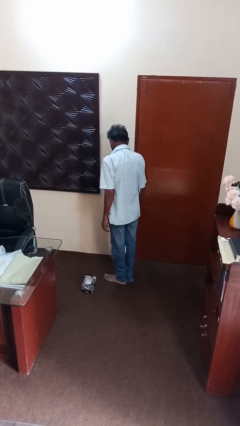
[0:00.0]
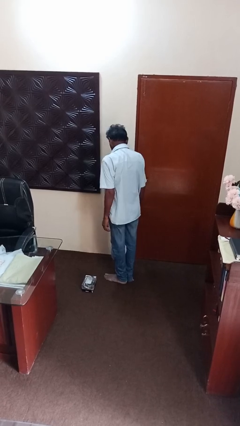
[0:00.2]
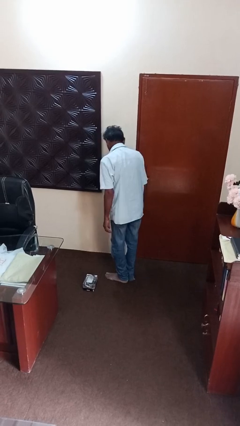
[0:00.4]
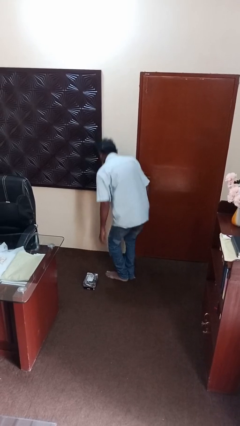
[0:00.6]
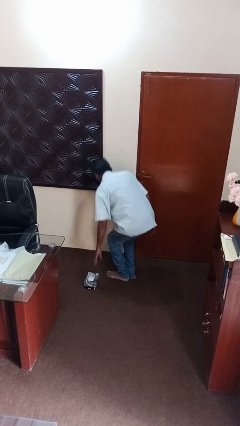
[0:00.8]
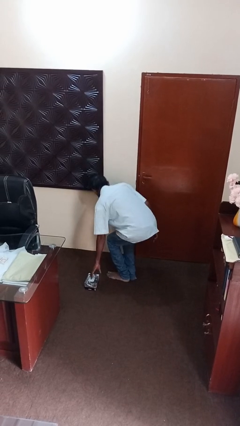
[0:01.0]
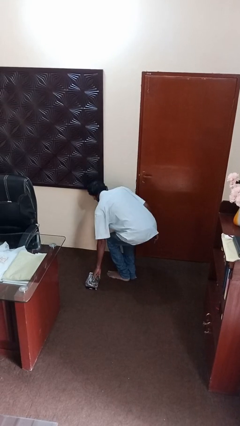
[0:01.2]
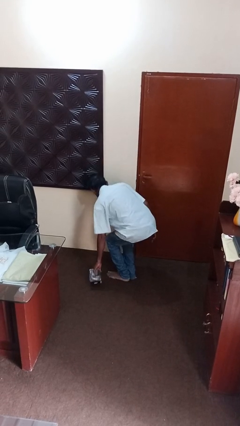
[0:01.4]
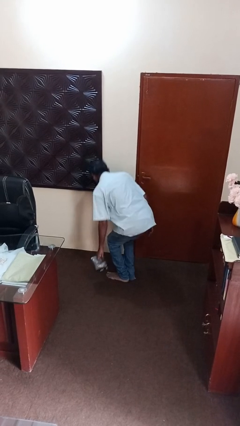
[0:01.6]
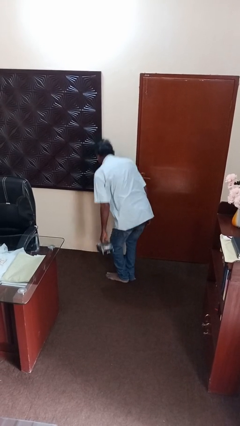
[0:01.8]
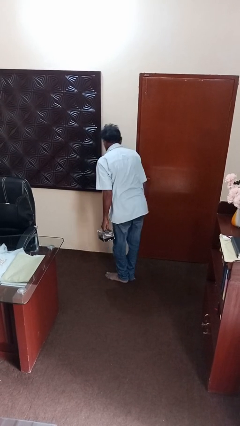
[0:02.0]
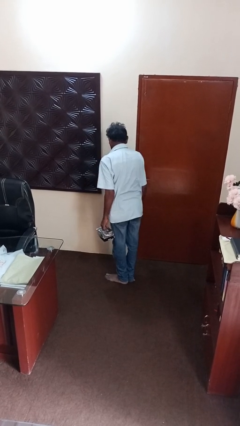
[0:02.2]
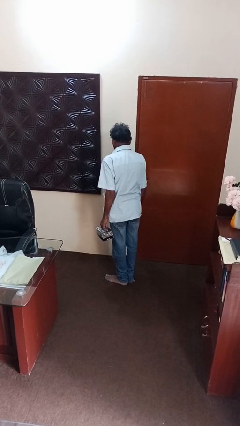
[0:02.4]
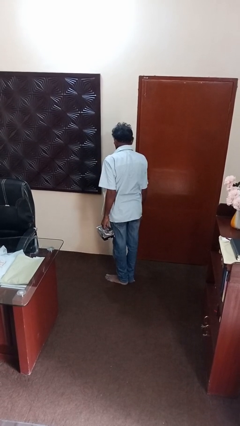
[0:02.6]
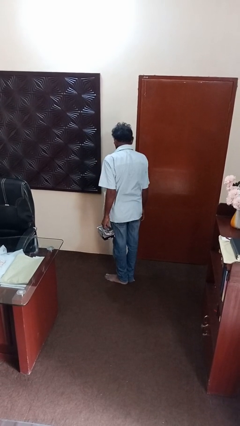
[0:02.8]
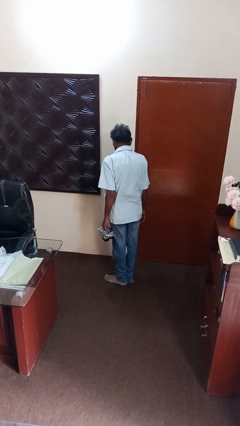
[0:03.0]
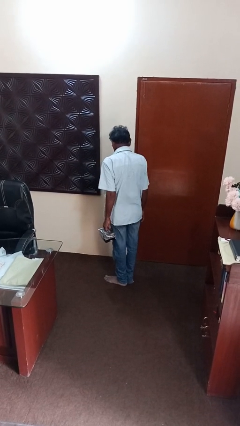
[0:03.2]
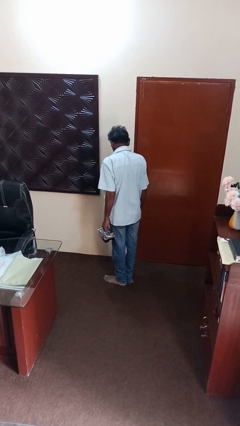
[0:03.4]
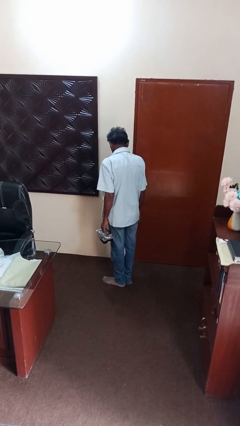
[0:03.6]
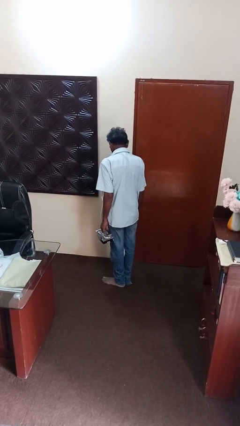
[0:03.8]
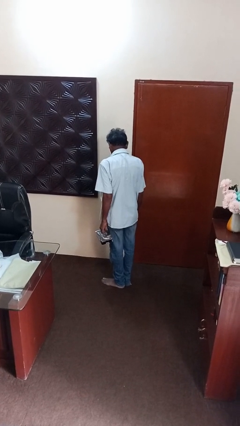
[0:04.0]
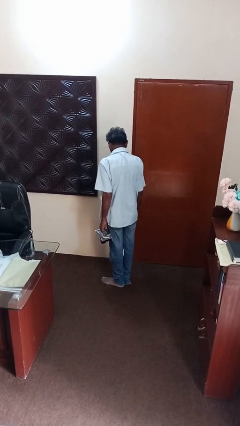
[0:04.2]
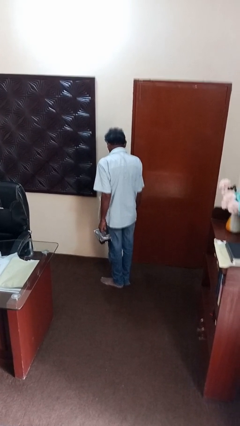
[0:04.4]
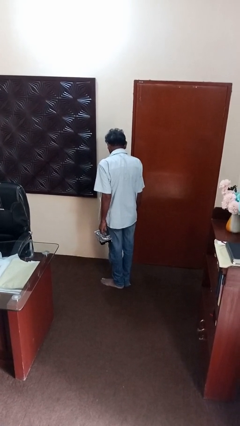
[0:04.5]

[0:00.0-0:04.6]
person picks up object from floor

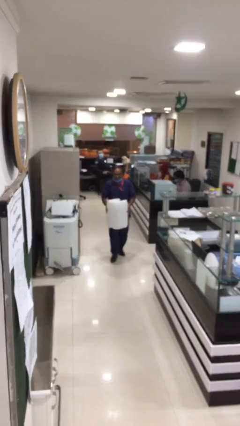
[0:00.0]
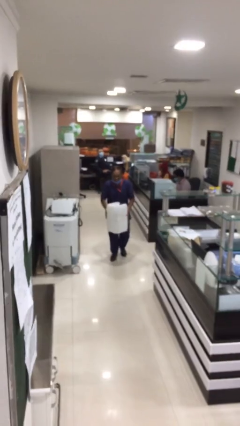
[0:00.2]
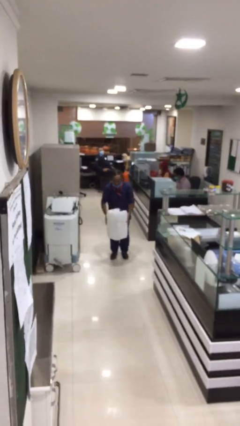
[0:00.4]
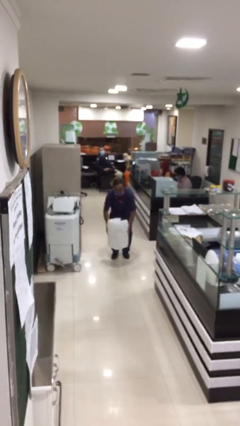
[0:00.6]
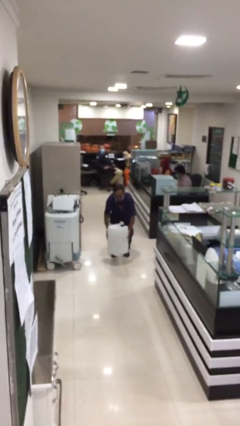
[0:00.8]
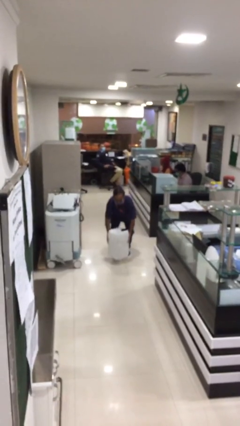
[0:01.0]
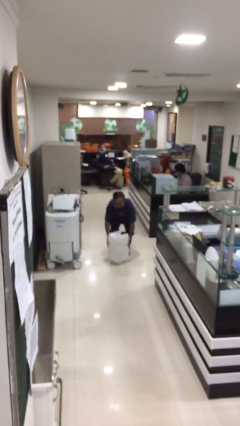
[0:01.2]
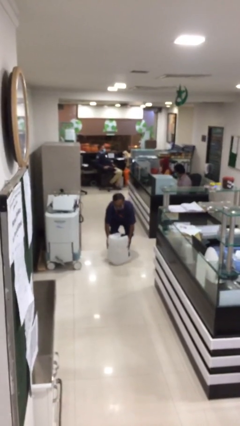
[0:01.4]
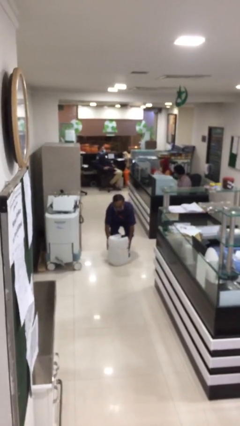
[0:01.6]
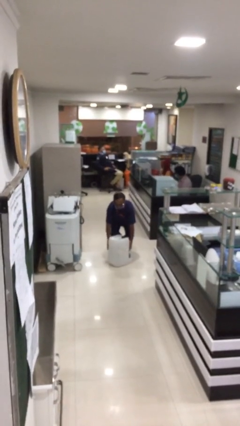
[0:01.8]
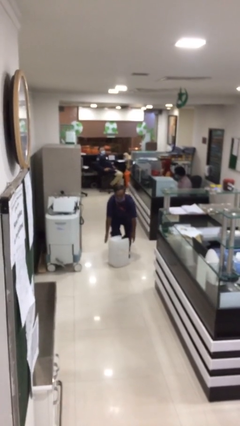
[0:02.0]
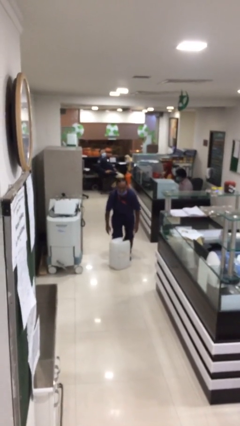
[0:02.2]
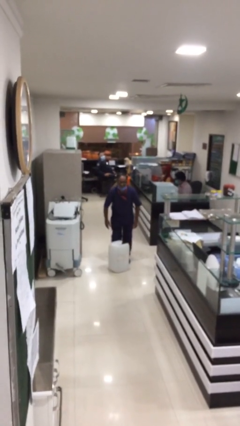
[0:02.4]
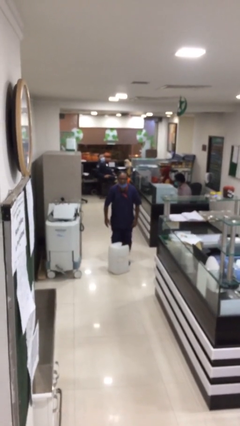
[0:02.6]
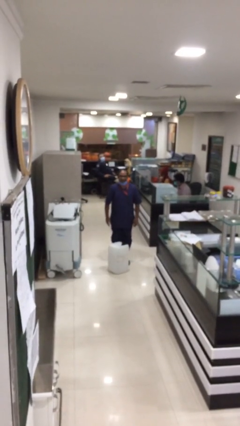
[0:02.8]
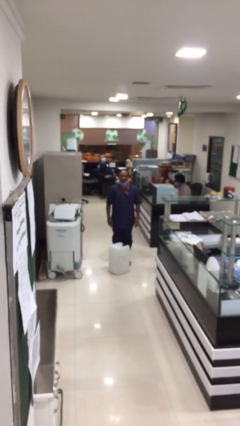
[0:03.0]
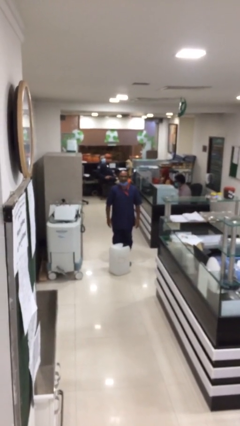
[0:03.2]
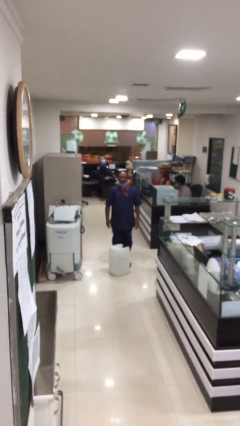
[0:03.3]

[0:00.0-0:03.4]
person puts down object on floor

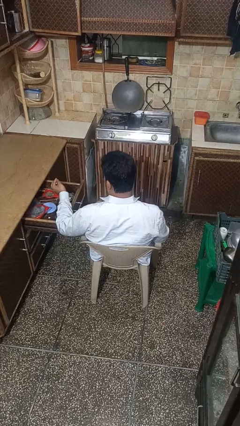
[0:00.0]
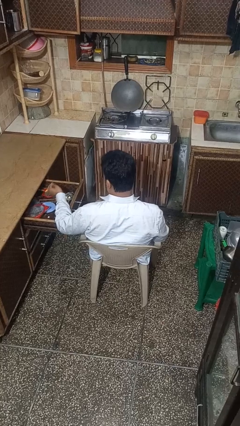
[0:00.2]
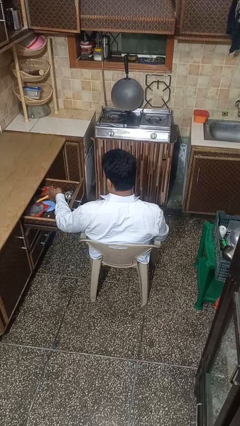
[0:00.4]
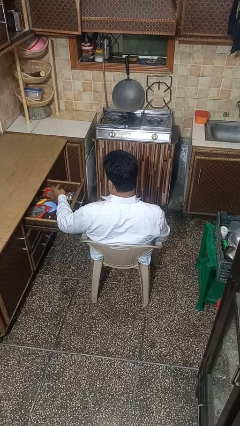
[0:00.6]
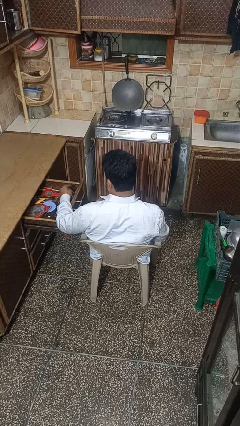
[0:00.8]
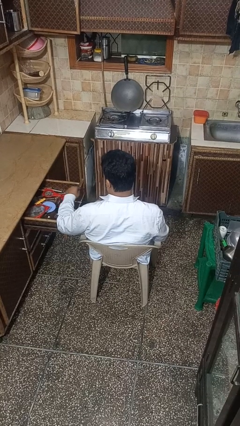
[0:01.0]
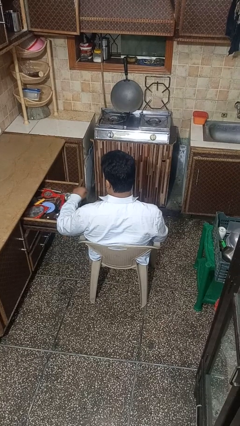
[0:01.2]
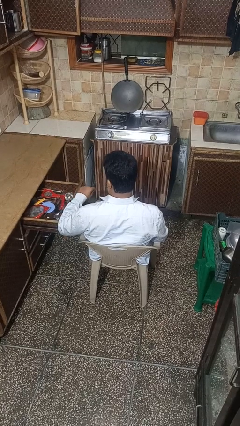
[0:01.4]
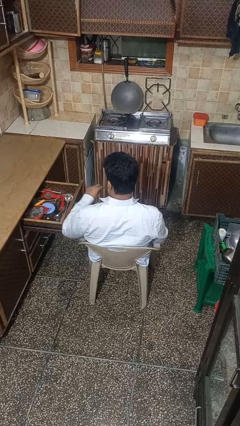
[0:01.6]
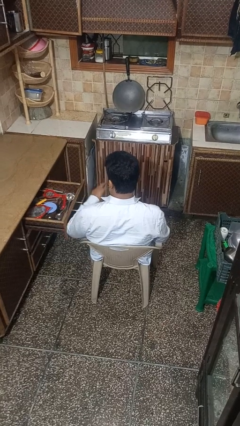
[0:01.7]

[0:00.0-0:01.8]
person puts object into kitchen drawer

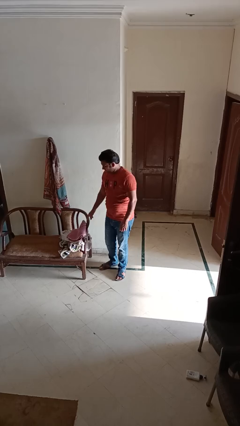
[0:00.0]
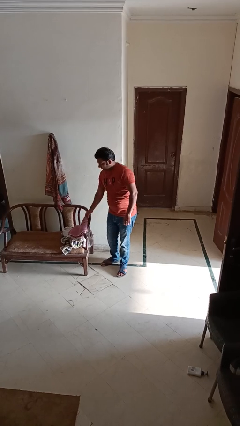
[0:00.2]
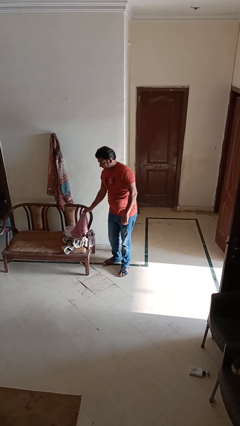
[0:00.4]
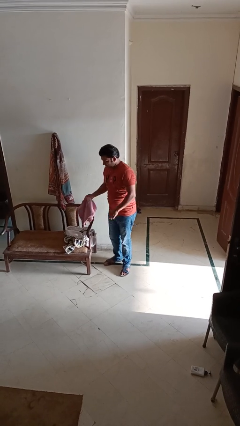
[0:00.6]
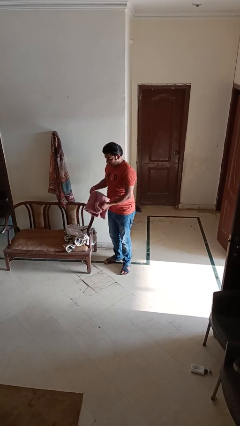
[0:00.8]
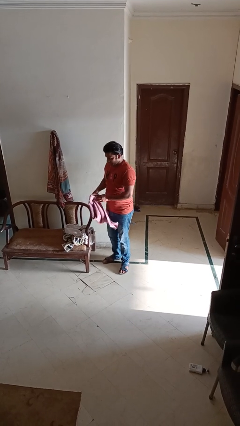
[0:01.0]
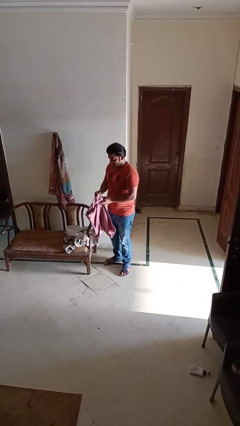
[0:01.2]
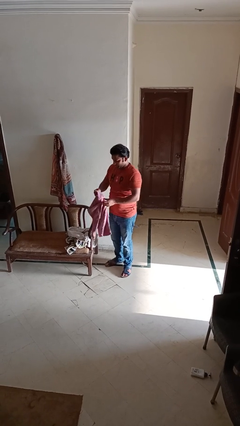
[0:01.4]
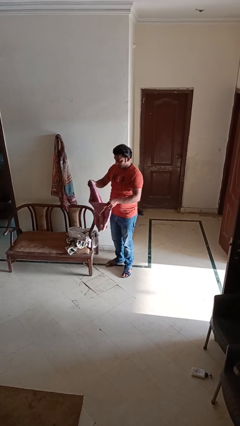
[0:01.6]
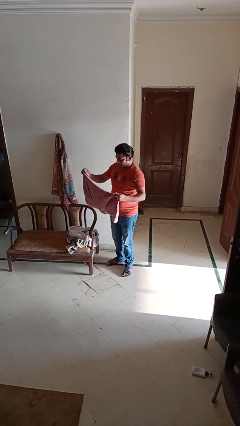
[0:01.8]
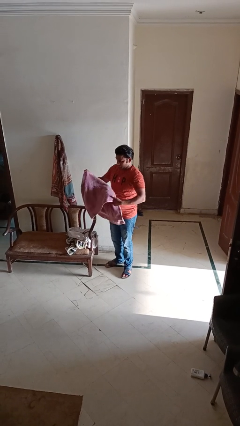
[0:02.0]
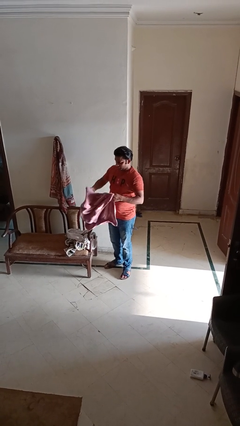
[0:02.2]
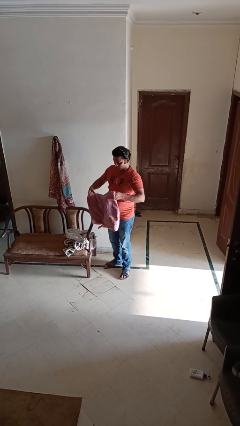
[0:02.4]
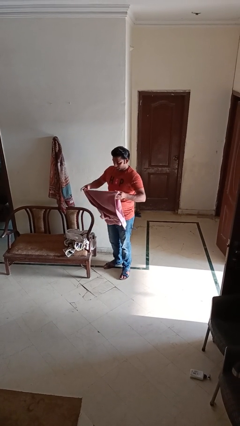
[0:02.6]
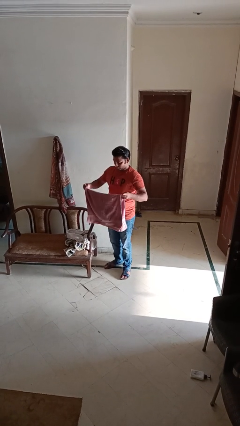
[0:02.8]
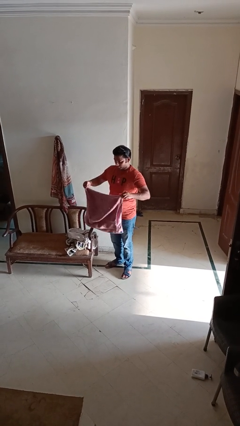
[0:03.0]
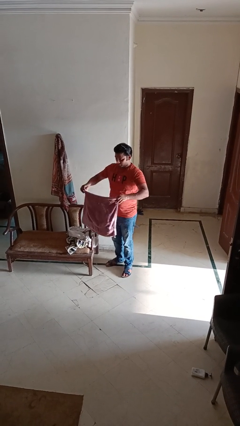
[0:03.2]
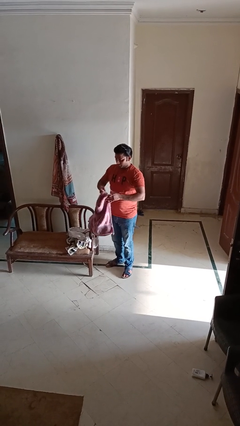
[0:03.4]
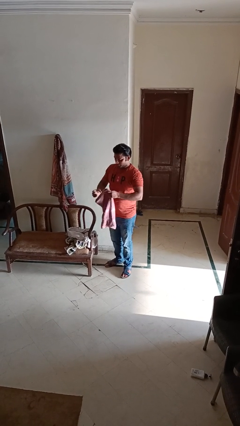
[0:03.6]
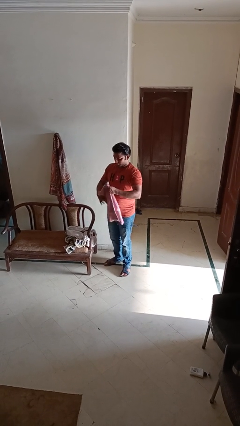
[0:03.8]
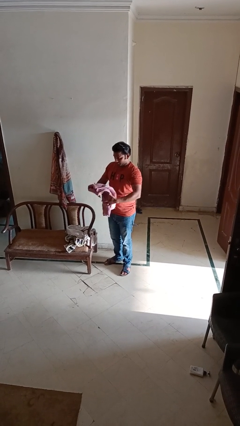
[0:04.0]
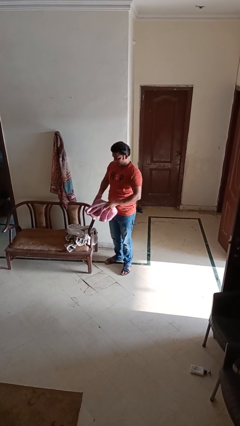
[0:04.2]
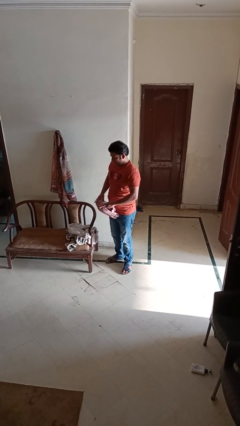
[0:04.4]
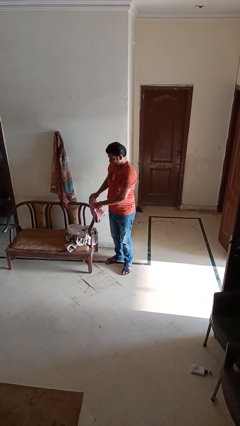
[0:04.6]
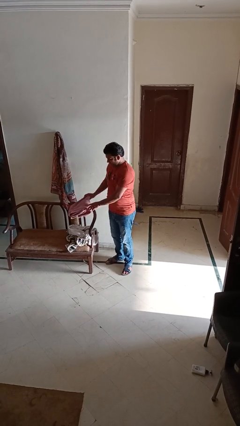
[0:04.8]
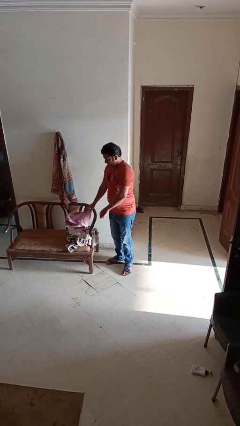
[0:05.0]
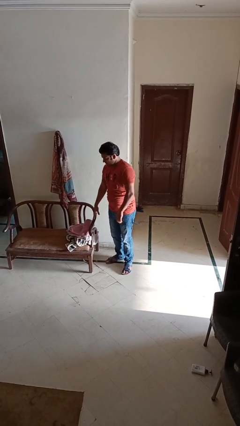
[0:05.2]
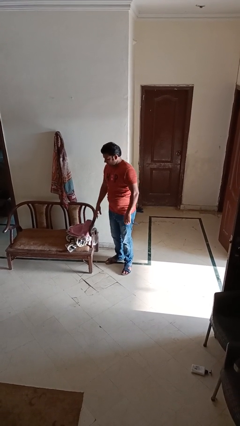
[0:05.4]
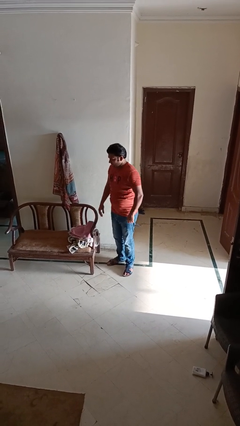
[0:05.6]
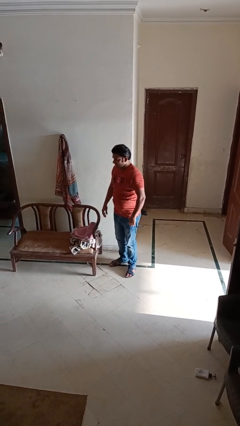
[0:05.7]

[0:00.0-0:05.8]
person folds towel

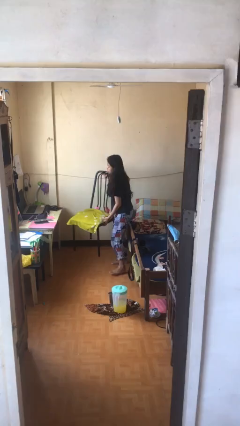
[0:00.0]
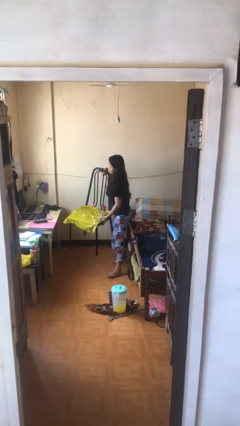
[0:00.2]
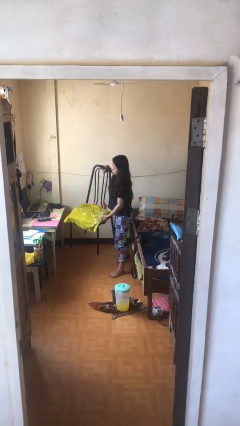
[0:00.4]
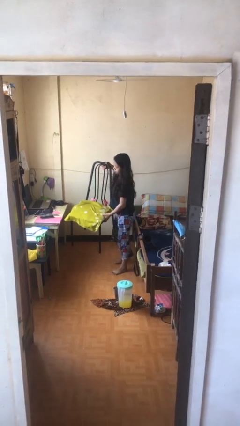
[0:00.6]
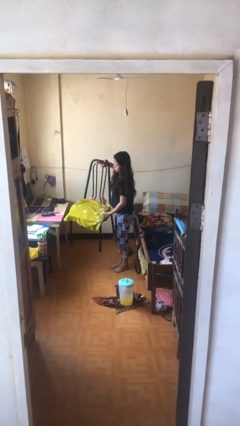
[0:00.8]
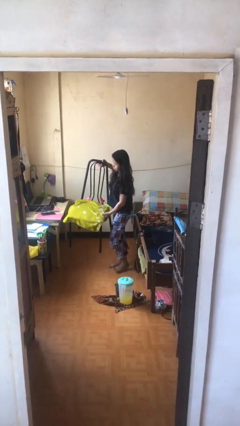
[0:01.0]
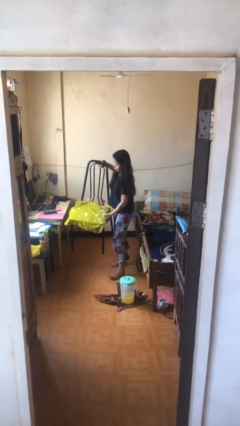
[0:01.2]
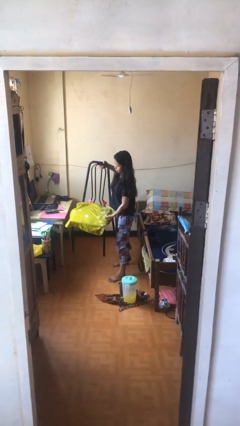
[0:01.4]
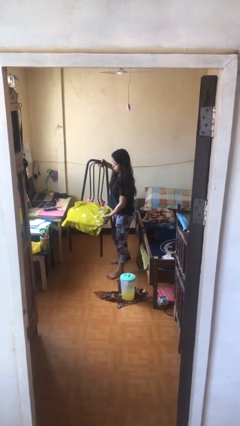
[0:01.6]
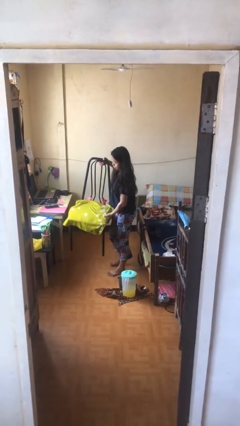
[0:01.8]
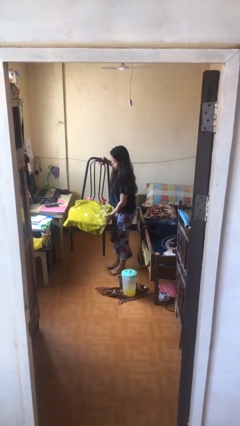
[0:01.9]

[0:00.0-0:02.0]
person carries heavy object

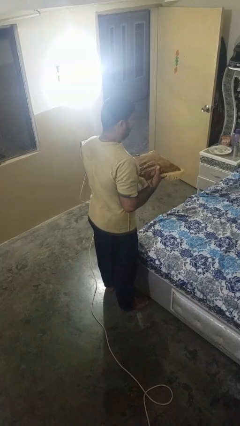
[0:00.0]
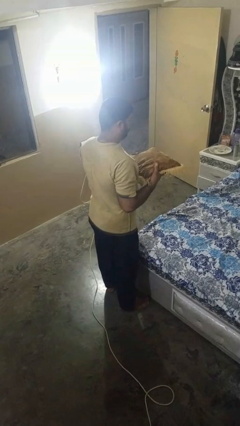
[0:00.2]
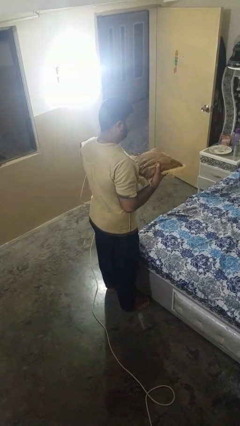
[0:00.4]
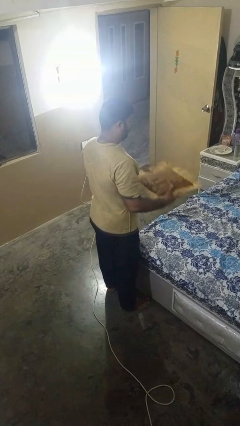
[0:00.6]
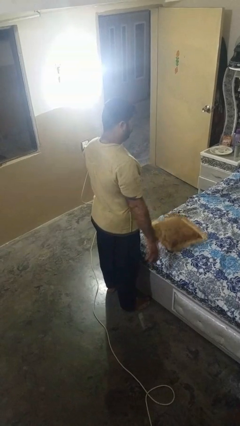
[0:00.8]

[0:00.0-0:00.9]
person puts down object on bed
